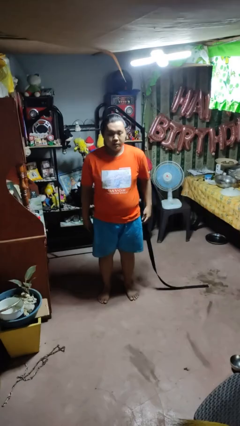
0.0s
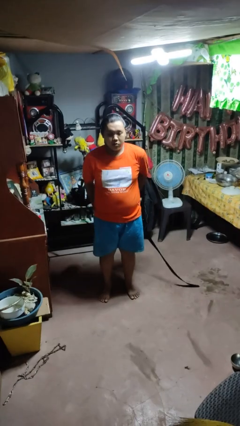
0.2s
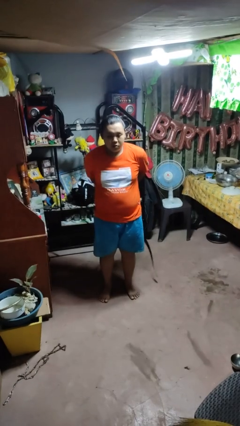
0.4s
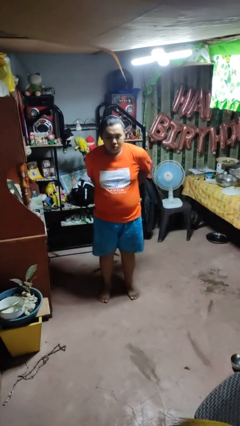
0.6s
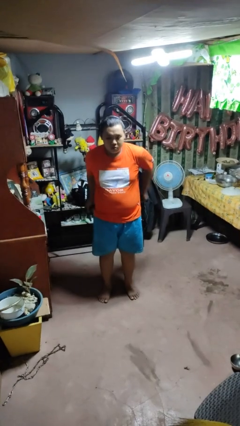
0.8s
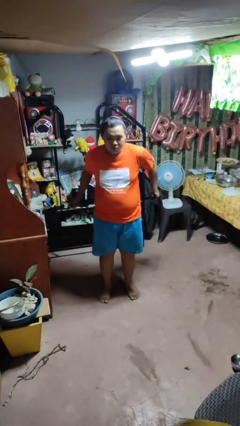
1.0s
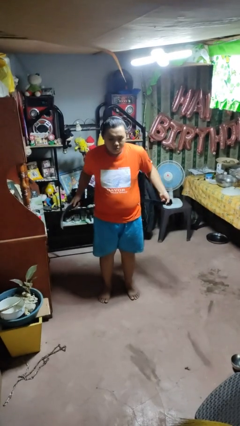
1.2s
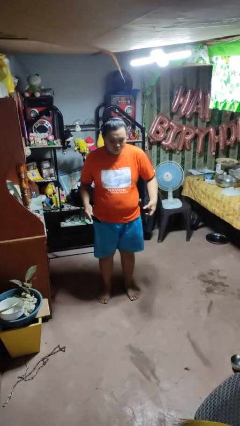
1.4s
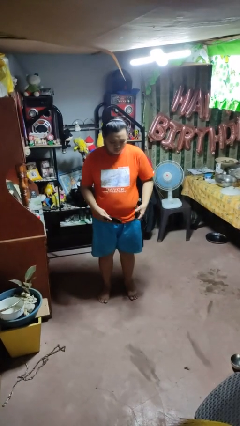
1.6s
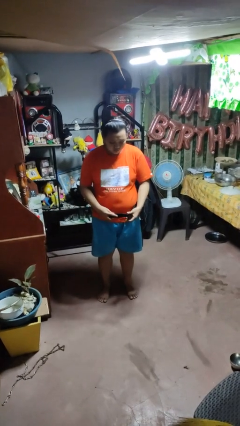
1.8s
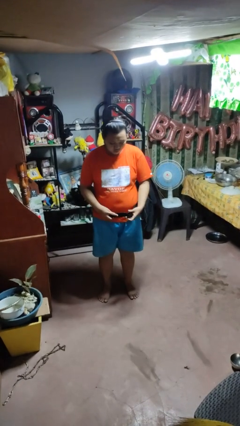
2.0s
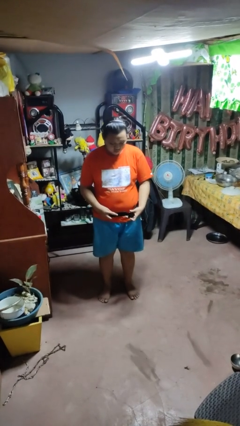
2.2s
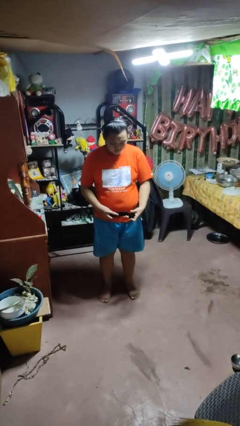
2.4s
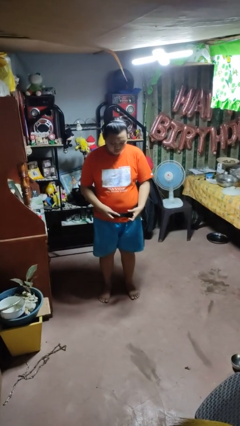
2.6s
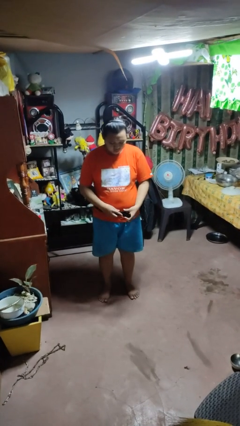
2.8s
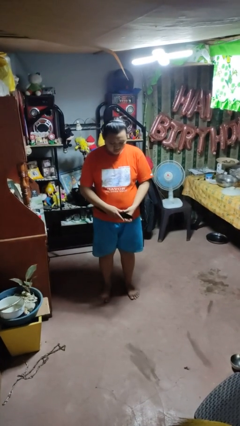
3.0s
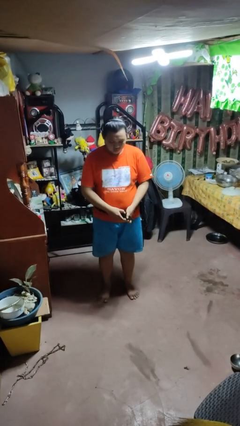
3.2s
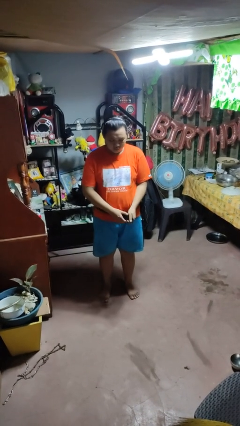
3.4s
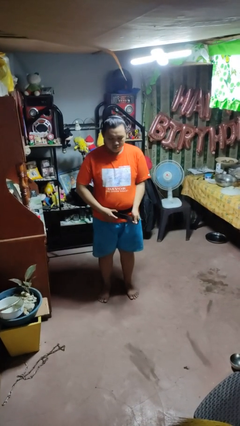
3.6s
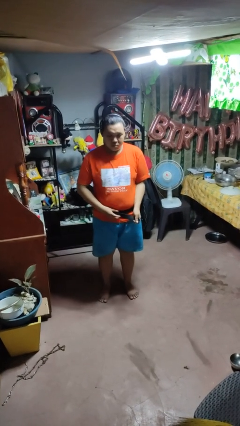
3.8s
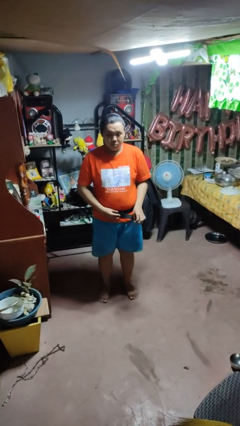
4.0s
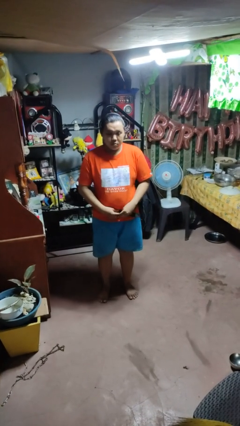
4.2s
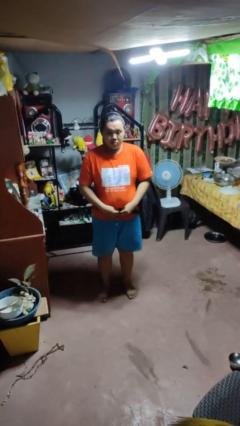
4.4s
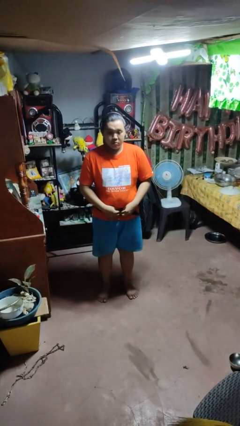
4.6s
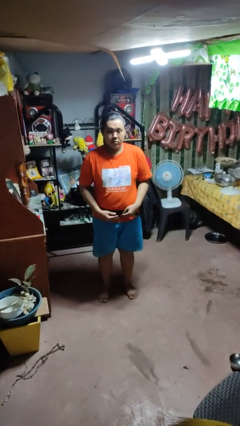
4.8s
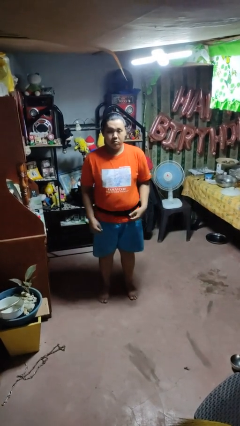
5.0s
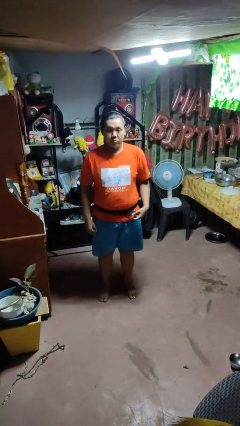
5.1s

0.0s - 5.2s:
person puts on belt

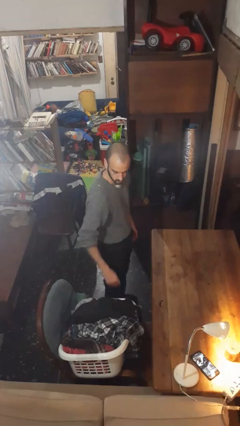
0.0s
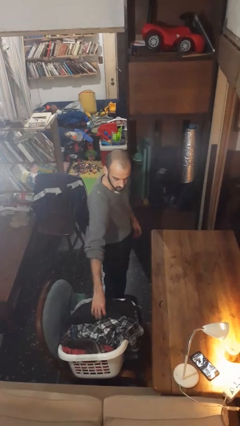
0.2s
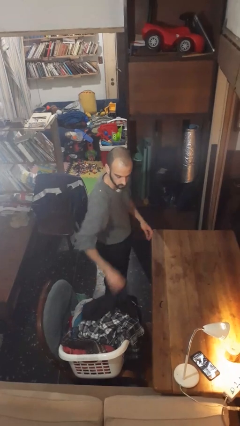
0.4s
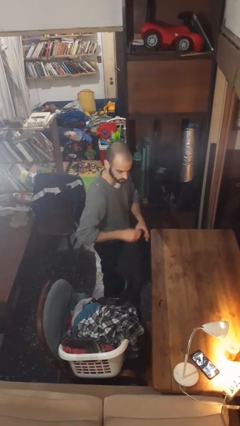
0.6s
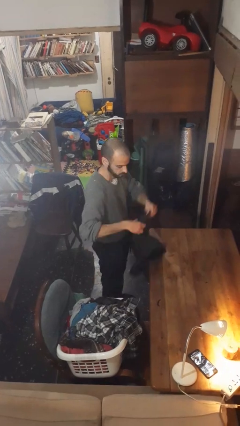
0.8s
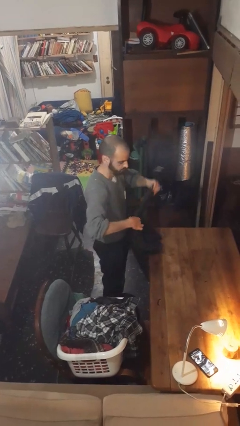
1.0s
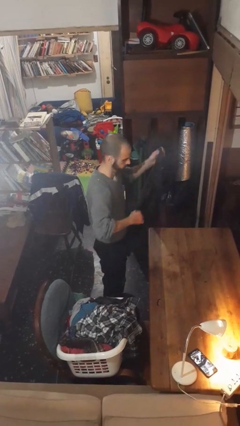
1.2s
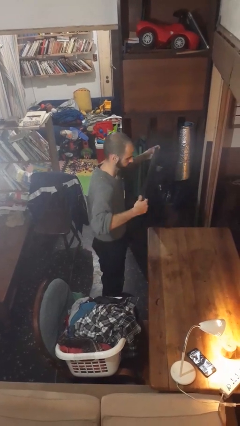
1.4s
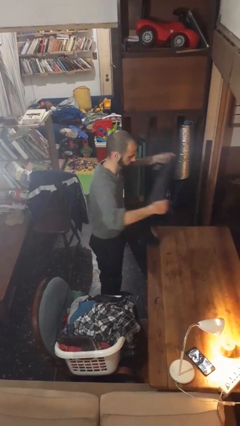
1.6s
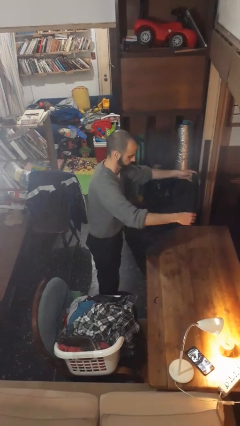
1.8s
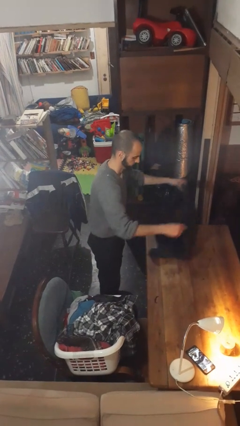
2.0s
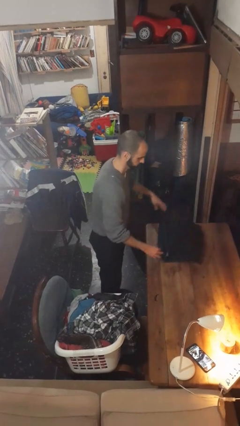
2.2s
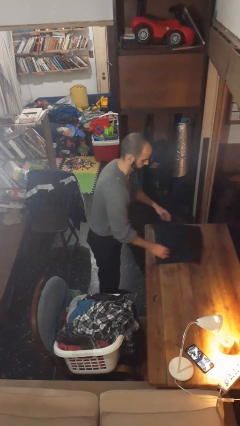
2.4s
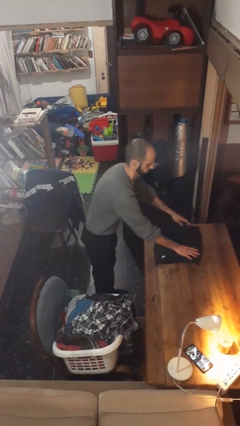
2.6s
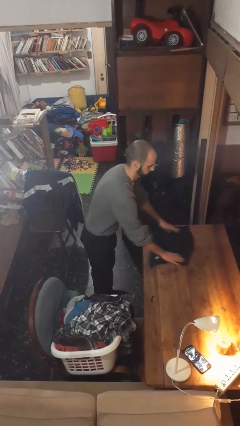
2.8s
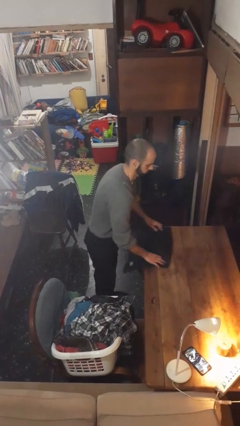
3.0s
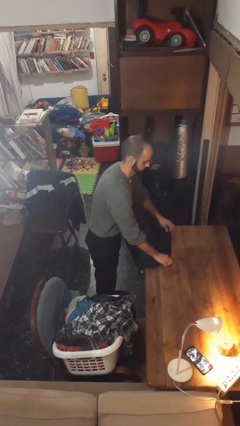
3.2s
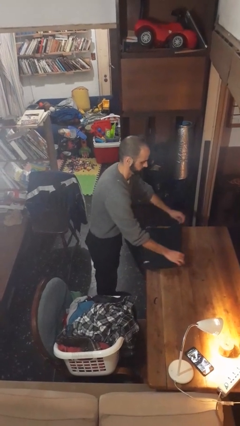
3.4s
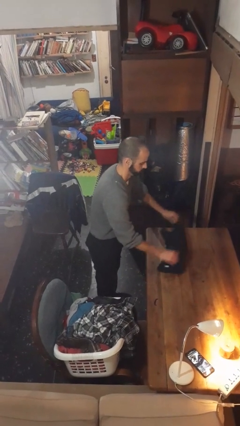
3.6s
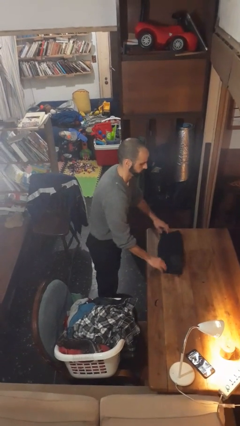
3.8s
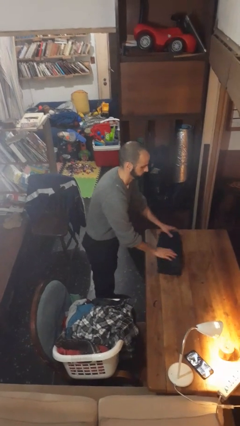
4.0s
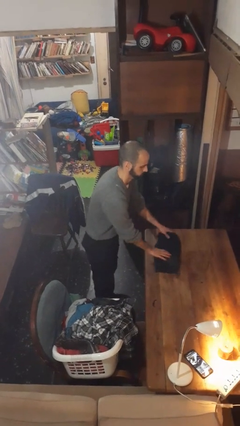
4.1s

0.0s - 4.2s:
person folds shirt

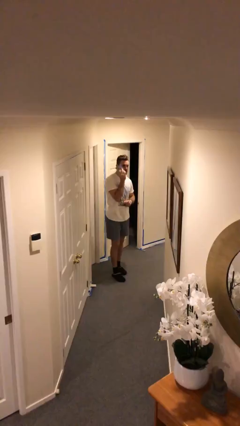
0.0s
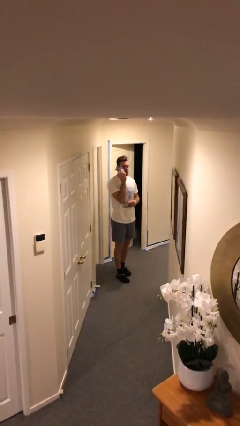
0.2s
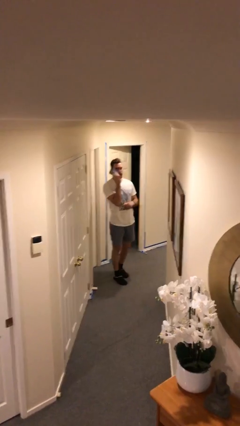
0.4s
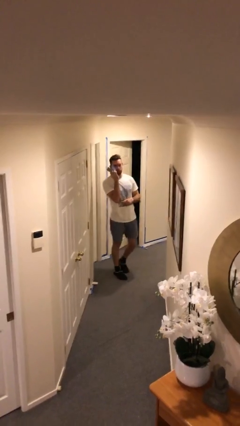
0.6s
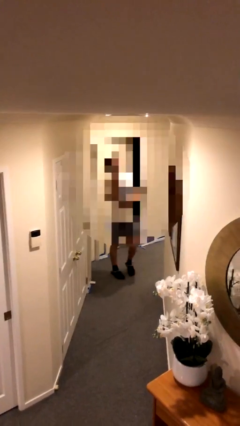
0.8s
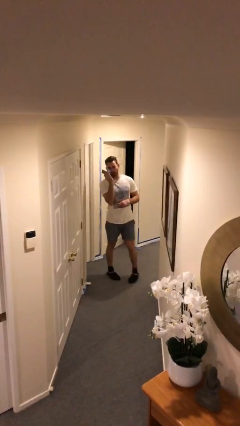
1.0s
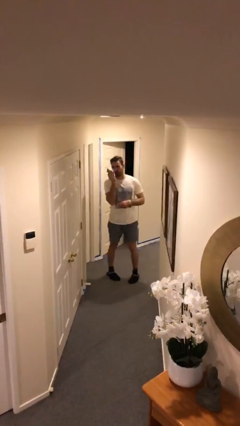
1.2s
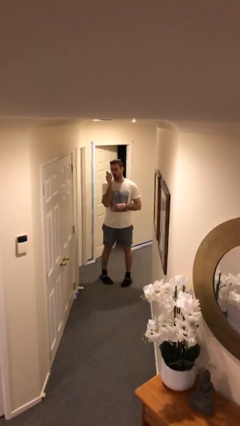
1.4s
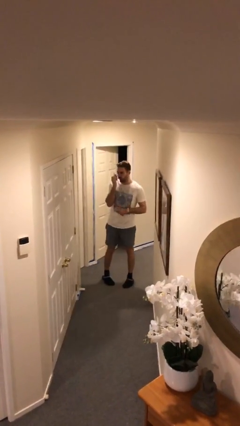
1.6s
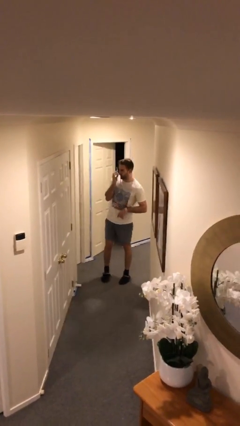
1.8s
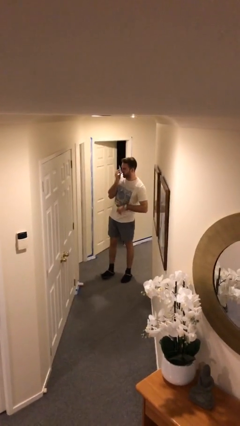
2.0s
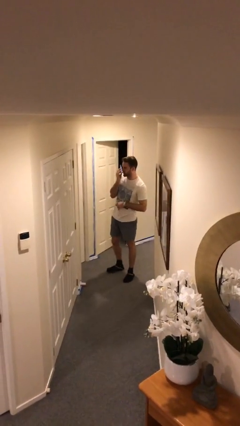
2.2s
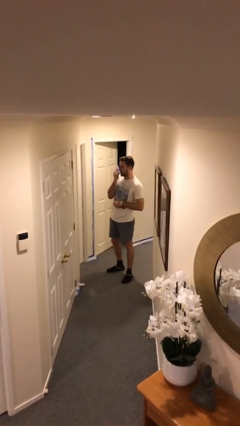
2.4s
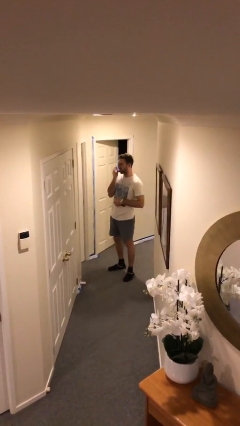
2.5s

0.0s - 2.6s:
person talks on phone

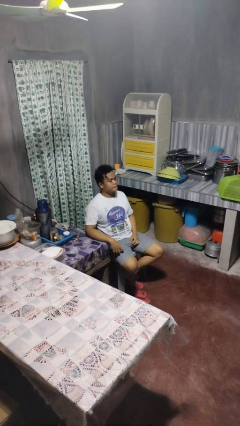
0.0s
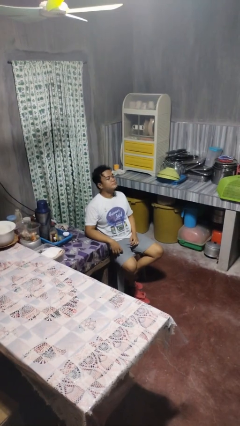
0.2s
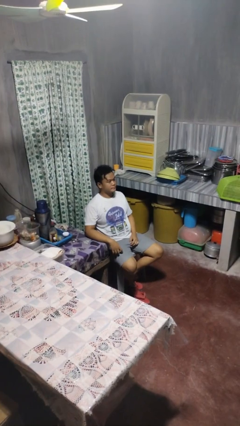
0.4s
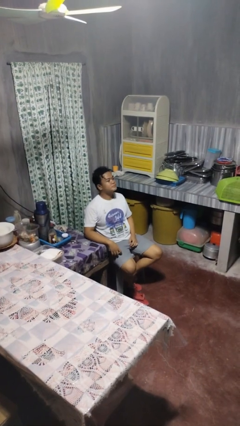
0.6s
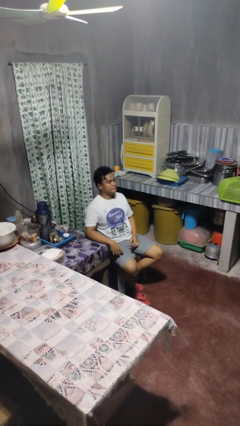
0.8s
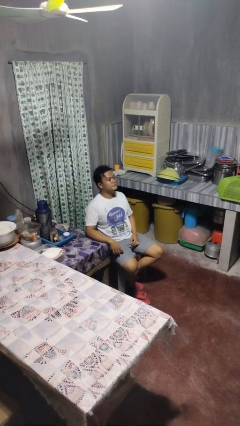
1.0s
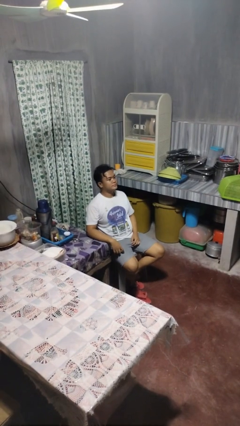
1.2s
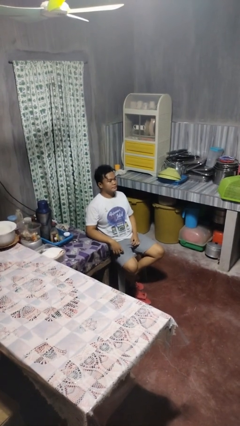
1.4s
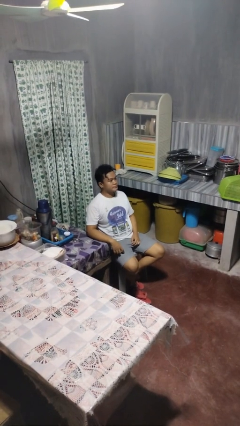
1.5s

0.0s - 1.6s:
person nods head

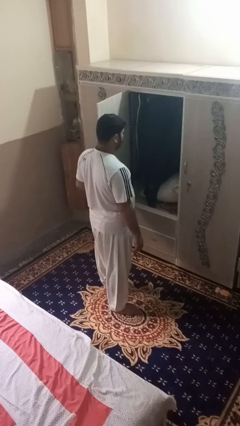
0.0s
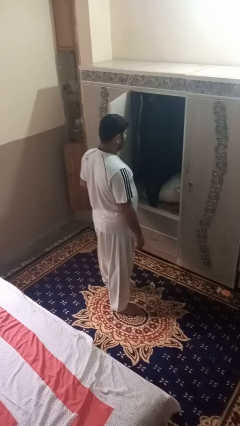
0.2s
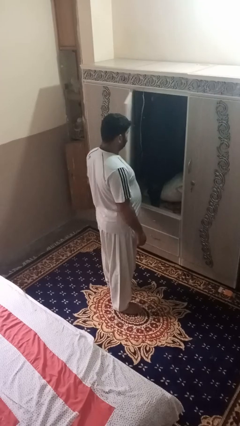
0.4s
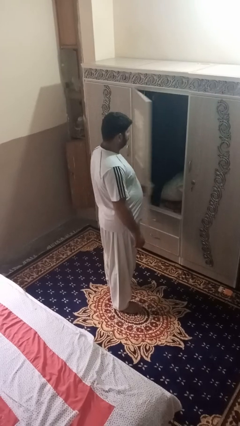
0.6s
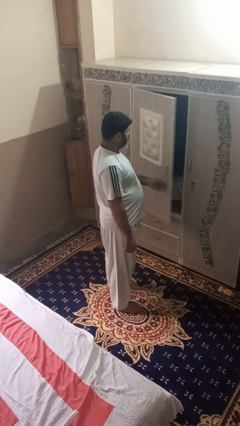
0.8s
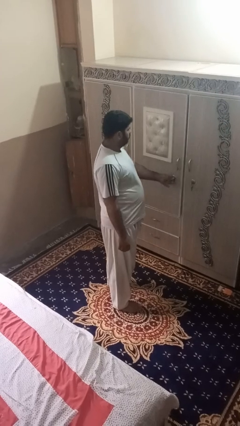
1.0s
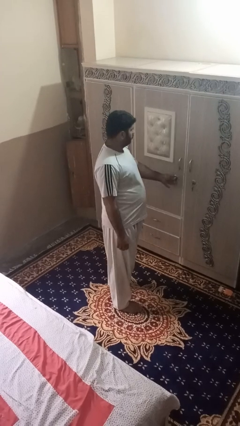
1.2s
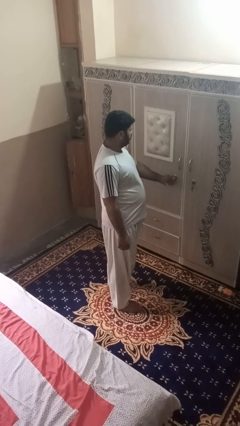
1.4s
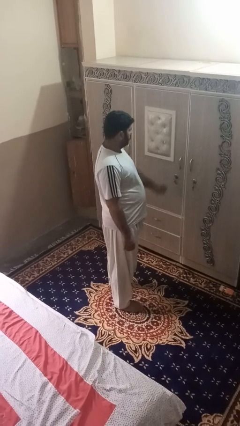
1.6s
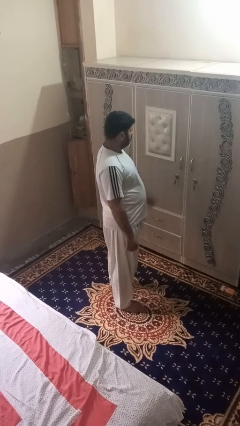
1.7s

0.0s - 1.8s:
person closes dresser drawer

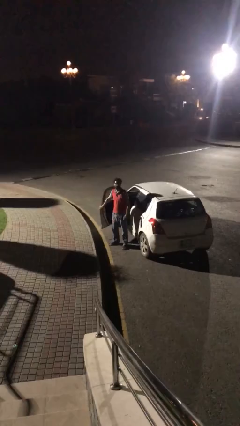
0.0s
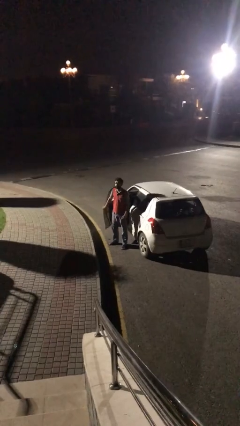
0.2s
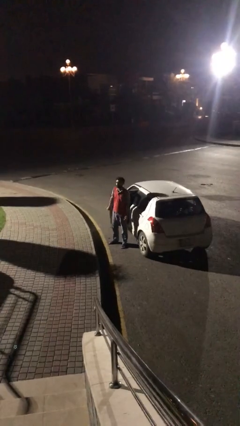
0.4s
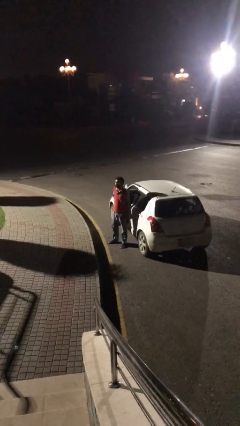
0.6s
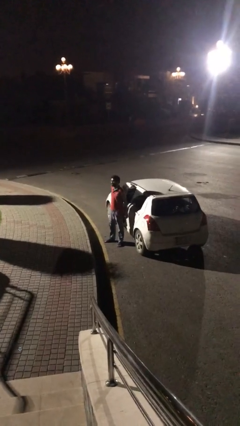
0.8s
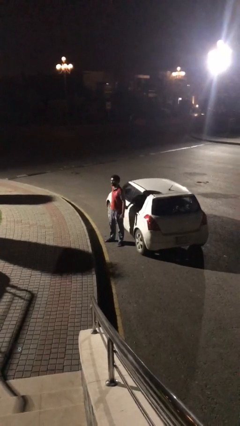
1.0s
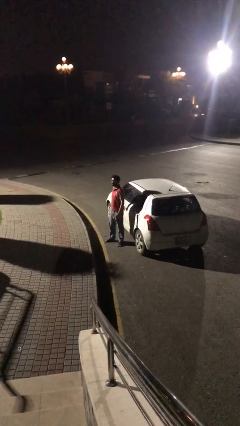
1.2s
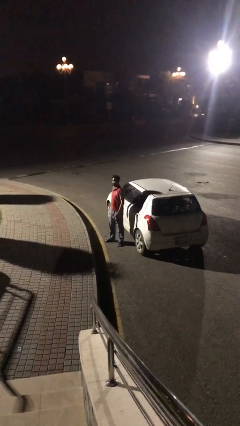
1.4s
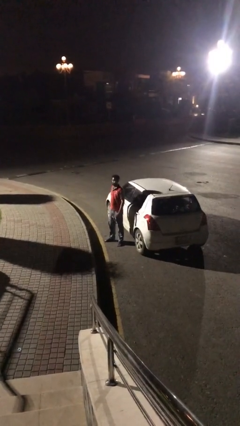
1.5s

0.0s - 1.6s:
person closes car door

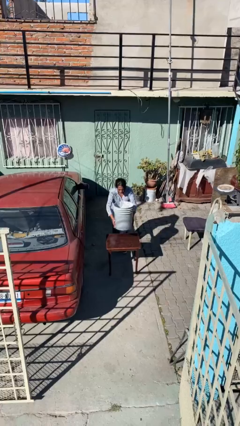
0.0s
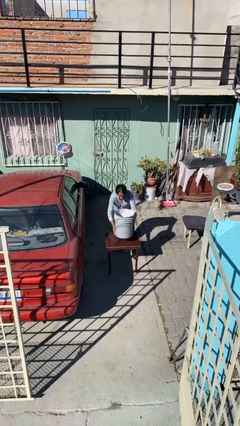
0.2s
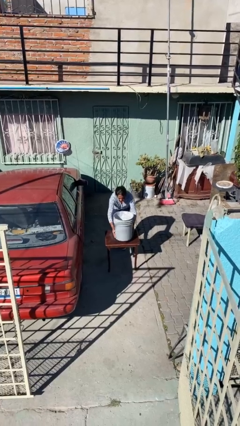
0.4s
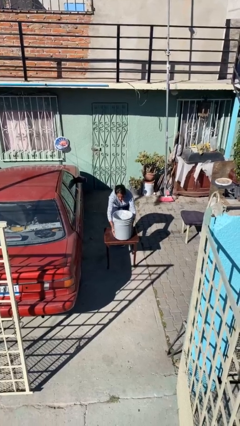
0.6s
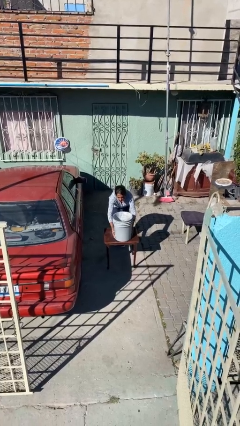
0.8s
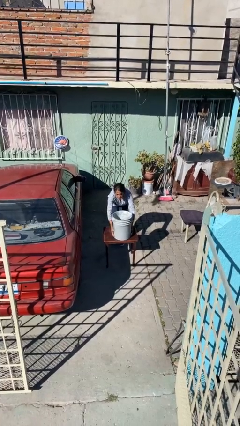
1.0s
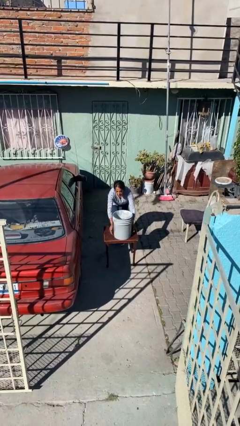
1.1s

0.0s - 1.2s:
person puts down object on table
